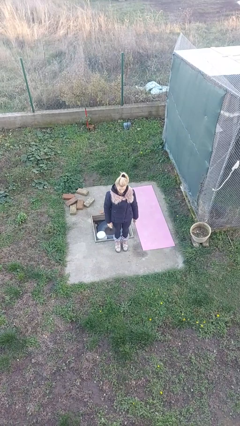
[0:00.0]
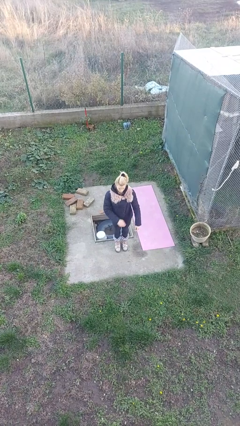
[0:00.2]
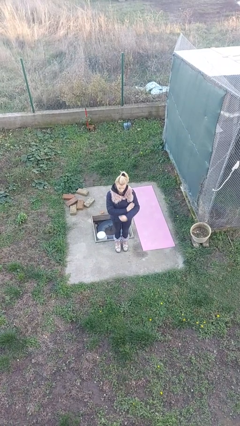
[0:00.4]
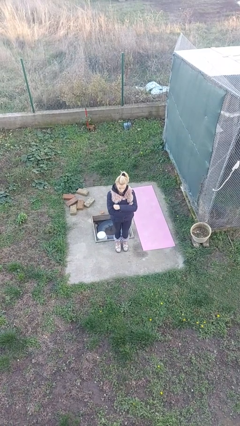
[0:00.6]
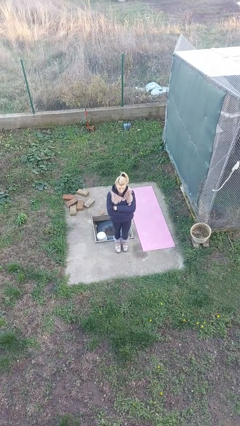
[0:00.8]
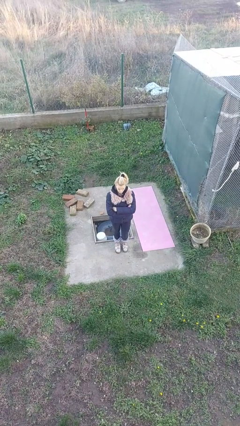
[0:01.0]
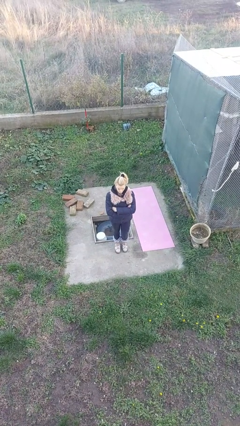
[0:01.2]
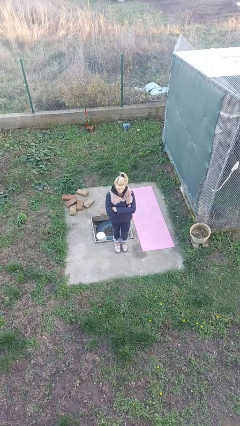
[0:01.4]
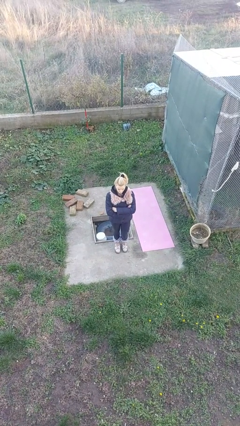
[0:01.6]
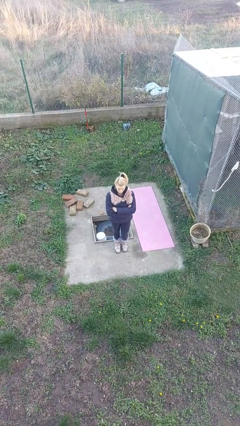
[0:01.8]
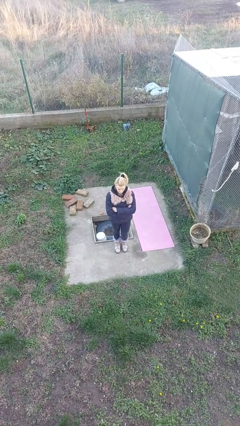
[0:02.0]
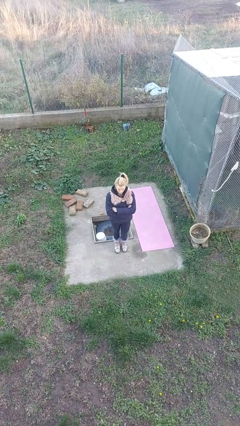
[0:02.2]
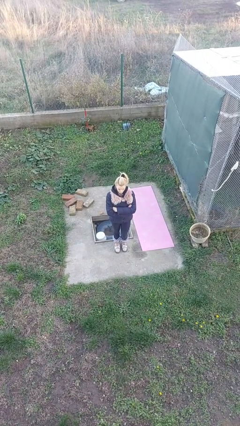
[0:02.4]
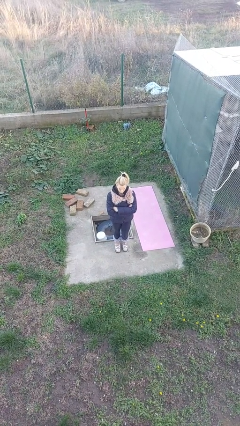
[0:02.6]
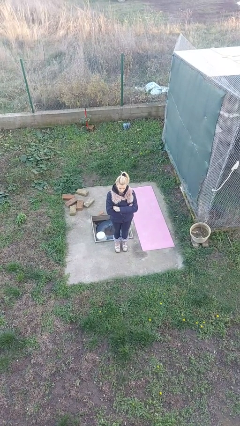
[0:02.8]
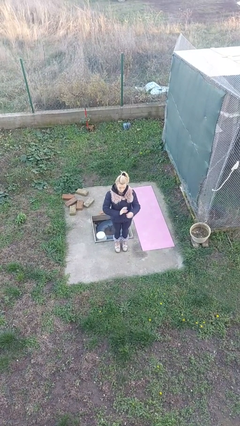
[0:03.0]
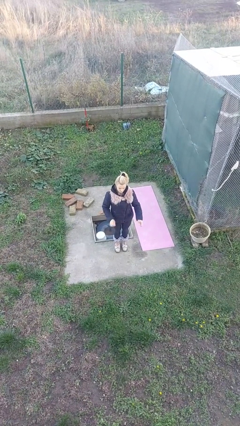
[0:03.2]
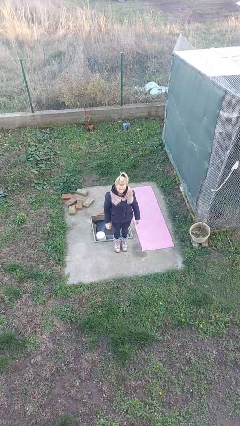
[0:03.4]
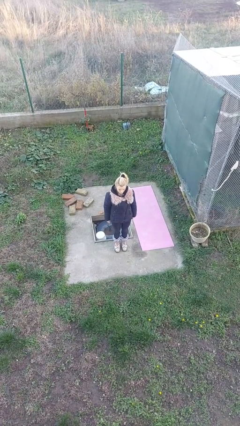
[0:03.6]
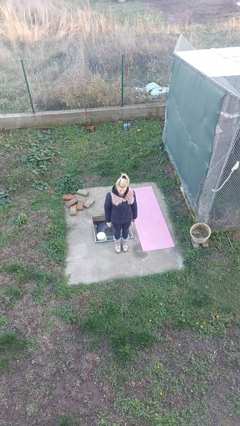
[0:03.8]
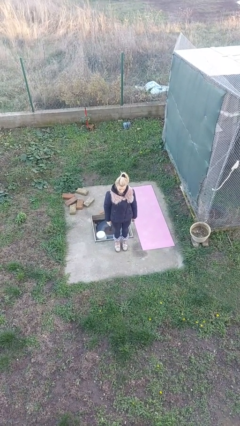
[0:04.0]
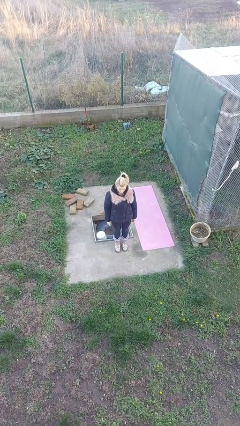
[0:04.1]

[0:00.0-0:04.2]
person crosses arms

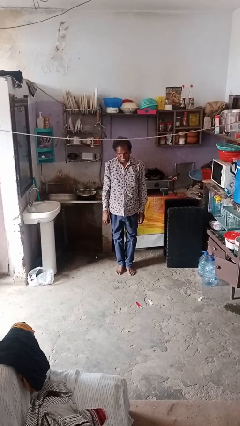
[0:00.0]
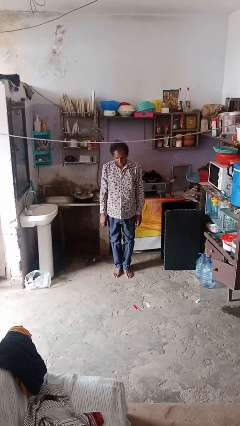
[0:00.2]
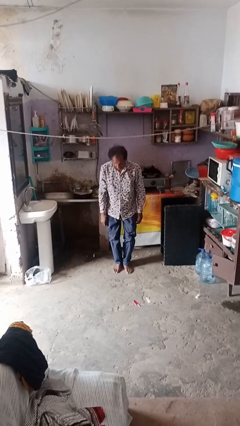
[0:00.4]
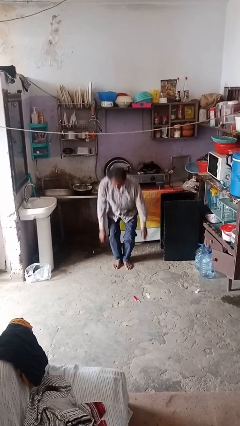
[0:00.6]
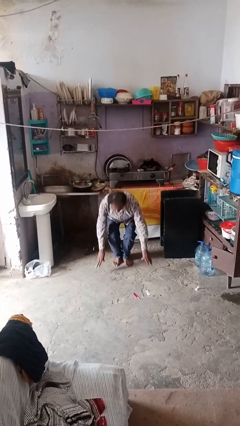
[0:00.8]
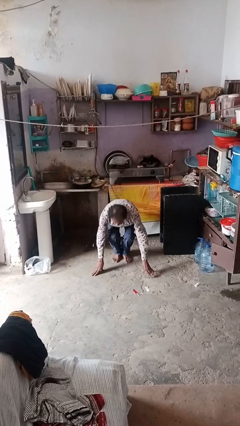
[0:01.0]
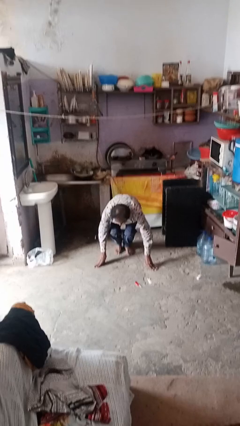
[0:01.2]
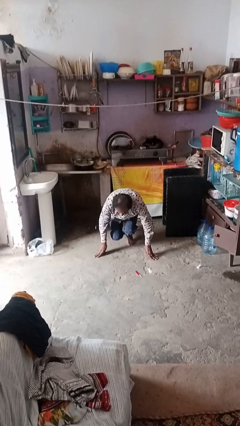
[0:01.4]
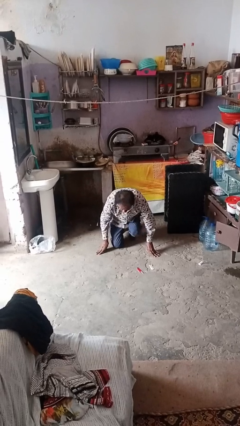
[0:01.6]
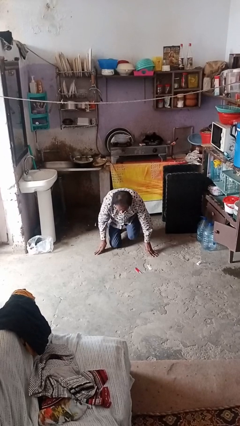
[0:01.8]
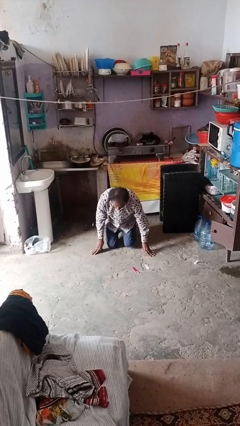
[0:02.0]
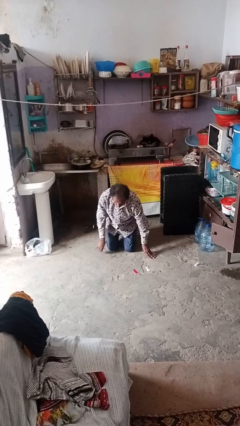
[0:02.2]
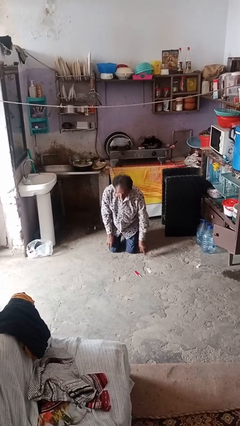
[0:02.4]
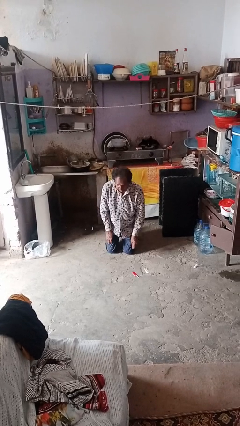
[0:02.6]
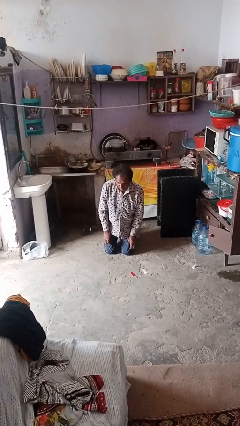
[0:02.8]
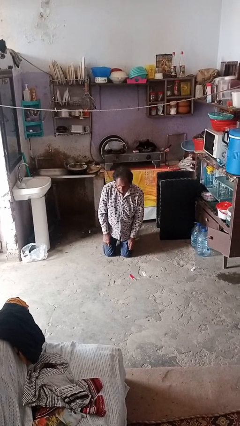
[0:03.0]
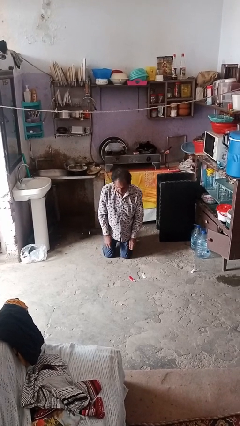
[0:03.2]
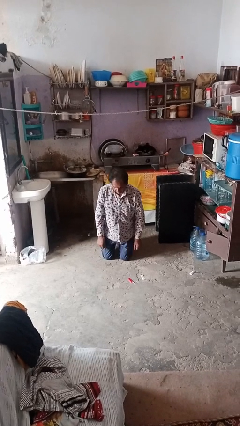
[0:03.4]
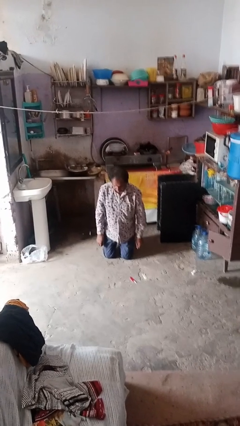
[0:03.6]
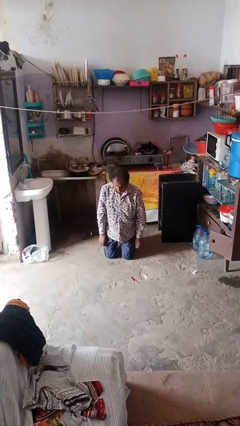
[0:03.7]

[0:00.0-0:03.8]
person kneels

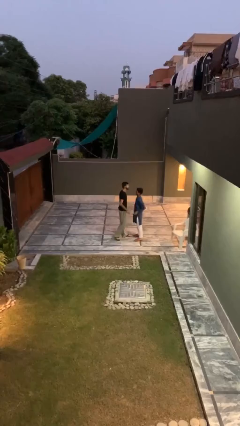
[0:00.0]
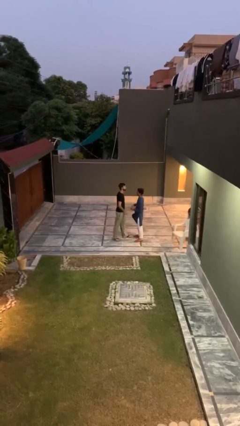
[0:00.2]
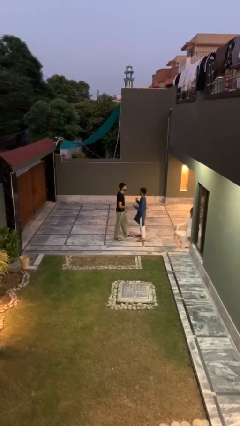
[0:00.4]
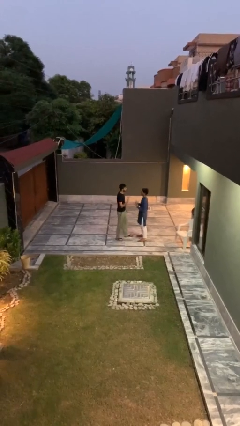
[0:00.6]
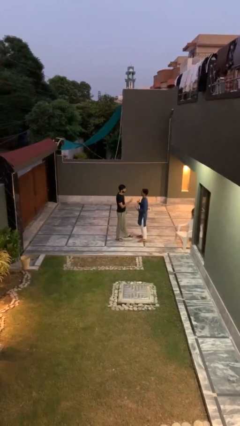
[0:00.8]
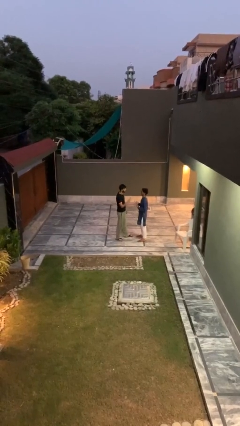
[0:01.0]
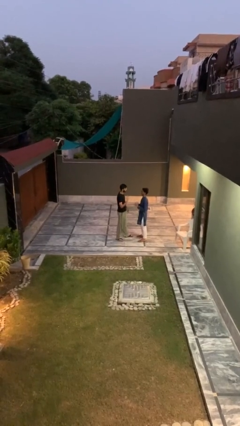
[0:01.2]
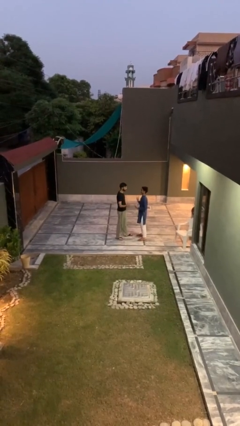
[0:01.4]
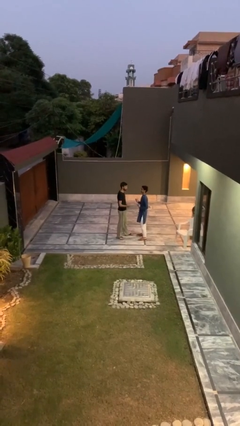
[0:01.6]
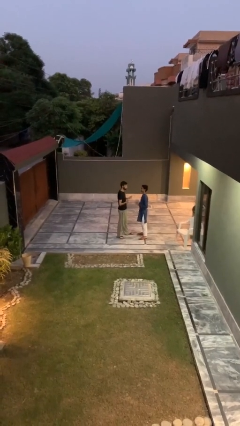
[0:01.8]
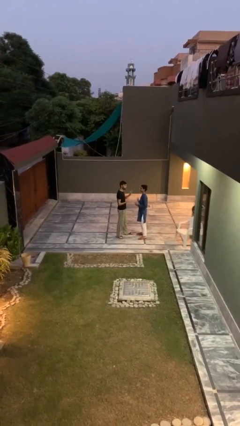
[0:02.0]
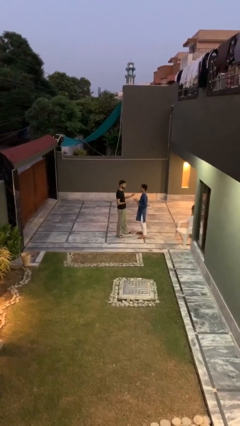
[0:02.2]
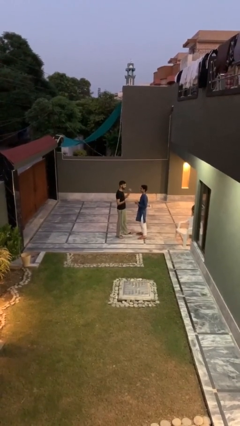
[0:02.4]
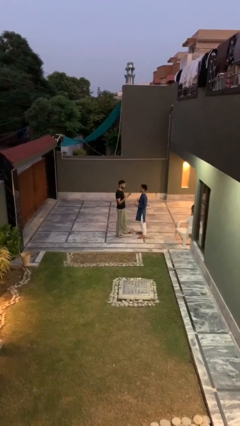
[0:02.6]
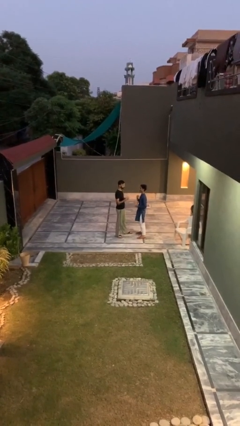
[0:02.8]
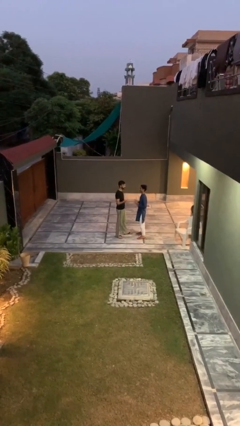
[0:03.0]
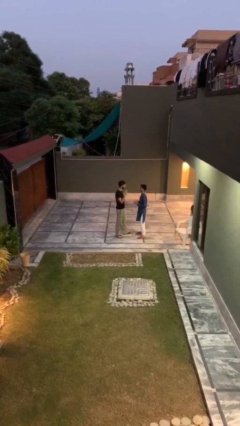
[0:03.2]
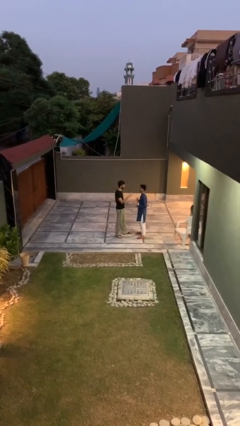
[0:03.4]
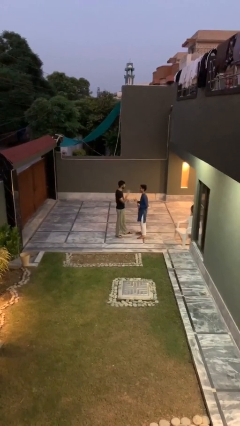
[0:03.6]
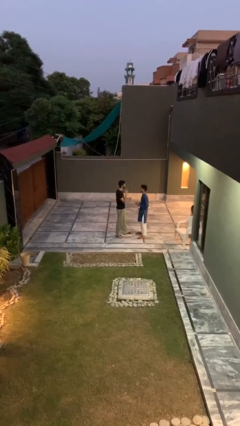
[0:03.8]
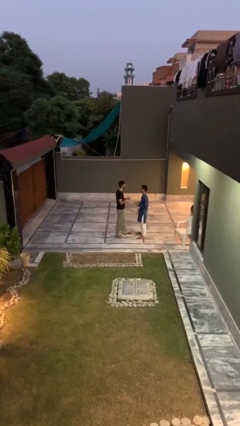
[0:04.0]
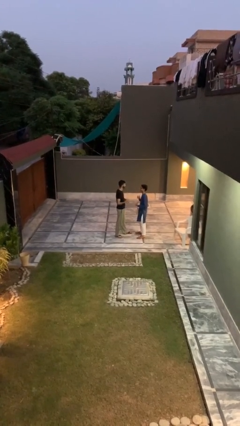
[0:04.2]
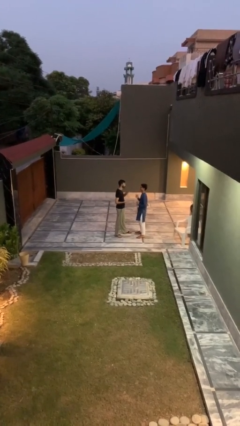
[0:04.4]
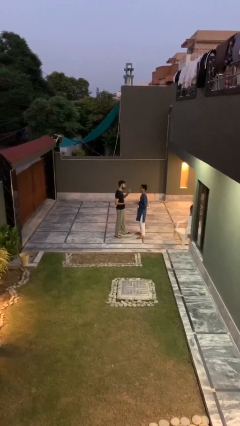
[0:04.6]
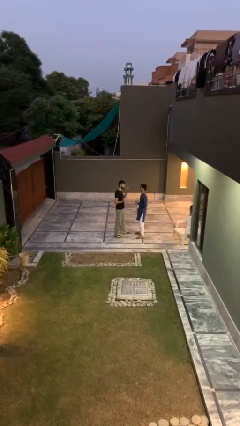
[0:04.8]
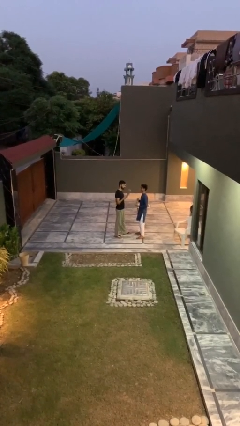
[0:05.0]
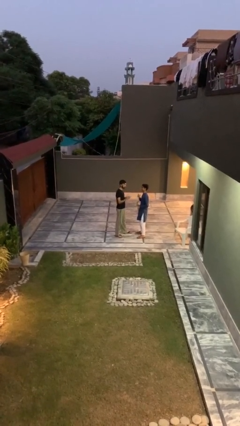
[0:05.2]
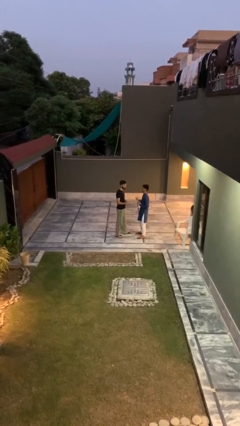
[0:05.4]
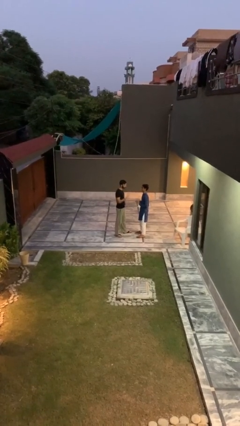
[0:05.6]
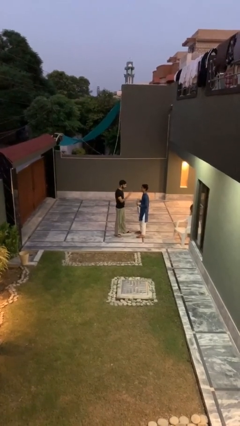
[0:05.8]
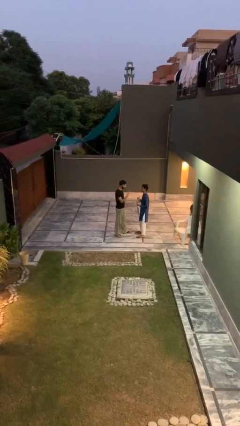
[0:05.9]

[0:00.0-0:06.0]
person talks to person

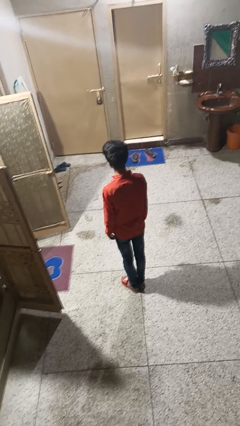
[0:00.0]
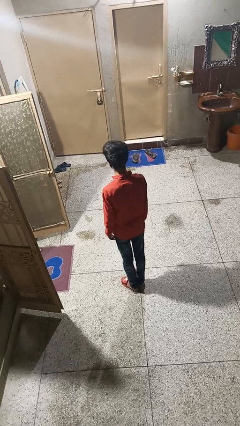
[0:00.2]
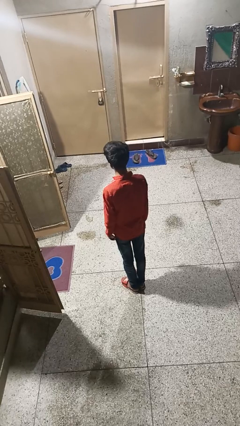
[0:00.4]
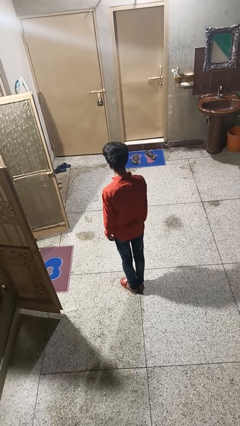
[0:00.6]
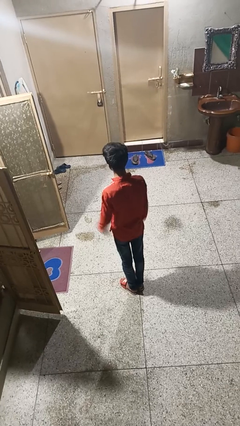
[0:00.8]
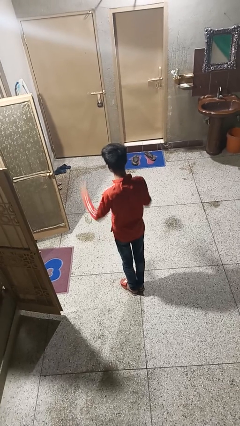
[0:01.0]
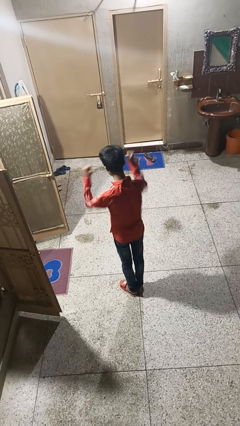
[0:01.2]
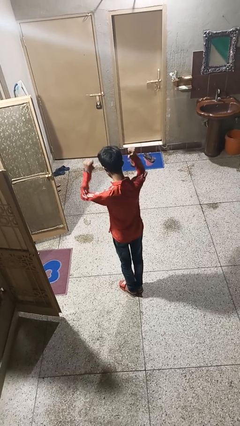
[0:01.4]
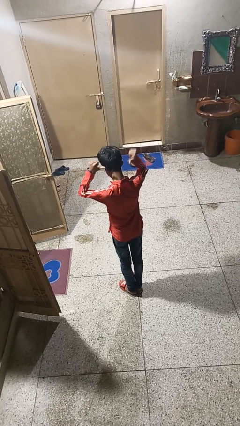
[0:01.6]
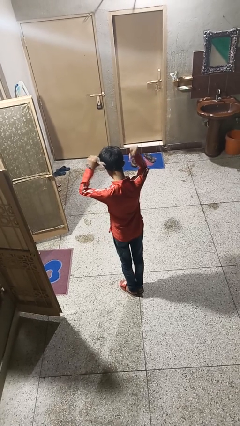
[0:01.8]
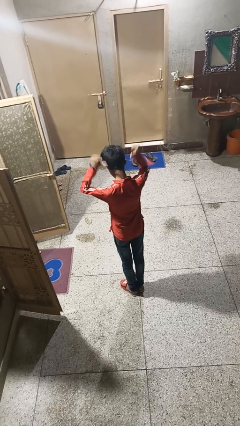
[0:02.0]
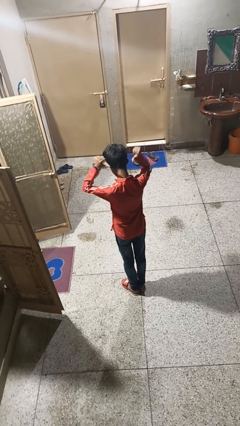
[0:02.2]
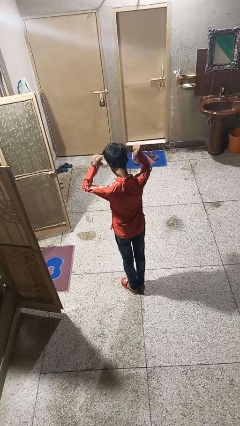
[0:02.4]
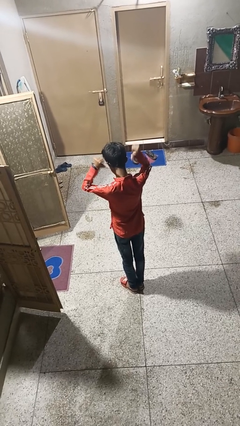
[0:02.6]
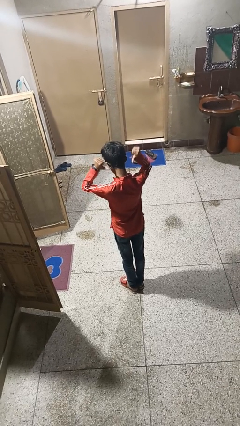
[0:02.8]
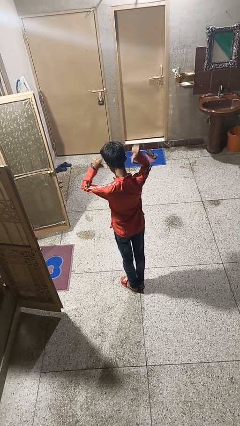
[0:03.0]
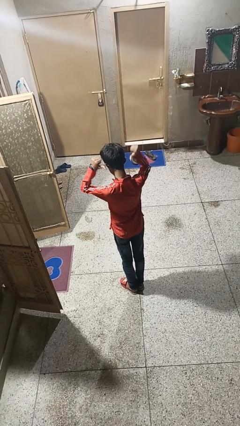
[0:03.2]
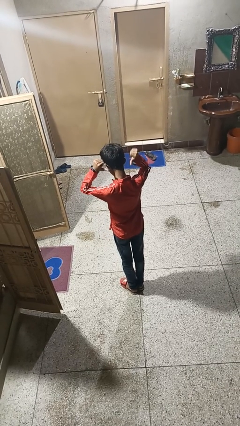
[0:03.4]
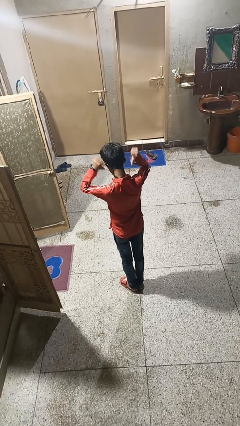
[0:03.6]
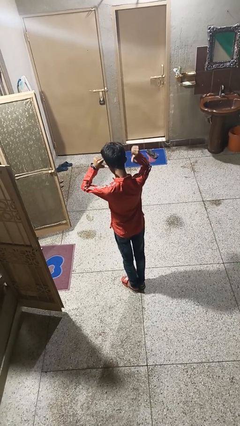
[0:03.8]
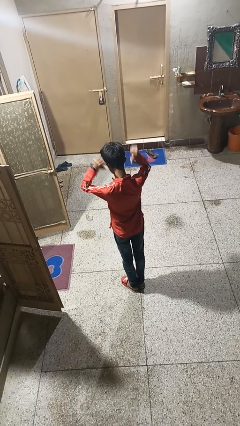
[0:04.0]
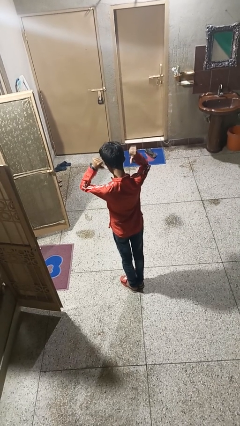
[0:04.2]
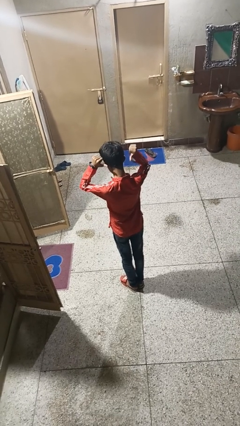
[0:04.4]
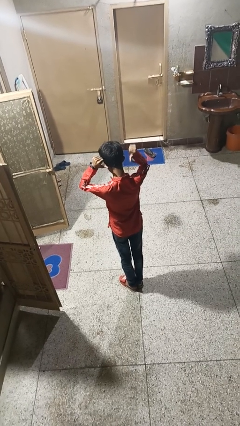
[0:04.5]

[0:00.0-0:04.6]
person gestures behind me
